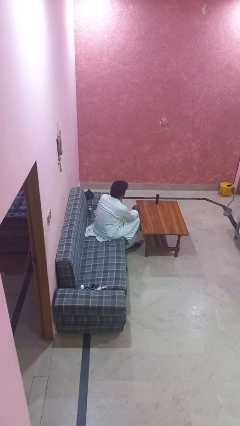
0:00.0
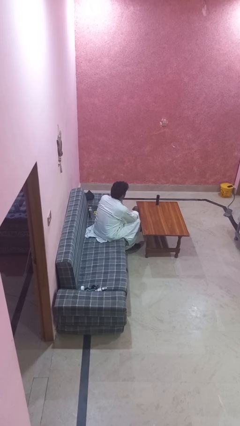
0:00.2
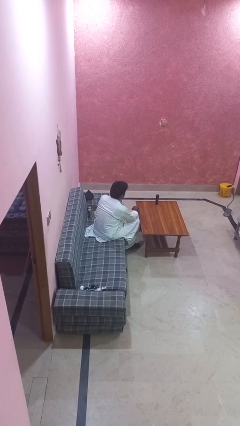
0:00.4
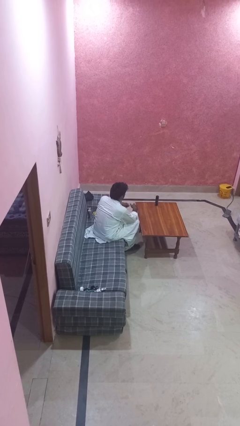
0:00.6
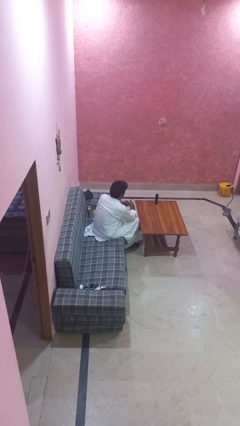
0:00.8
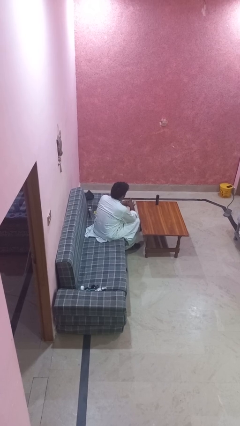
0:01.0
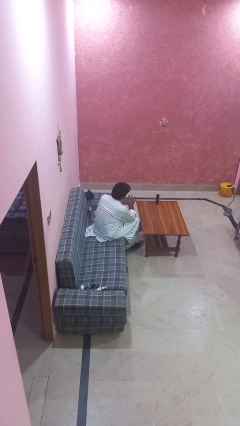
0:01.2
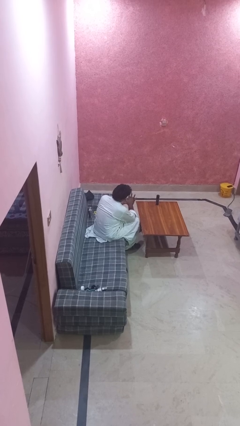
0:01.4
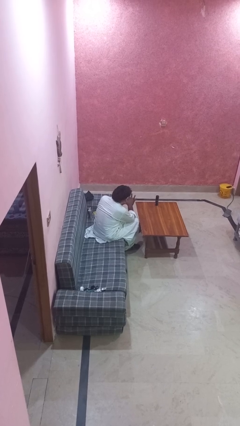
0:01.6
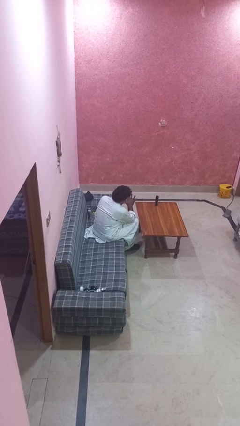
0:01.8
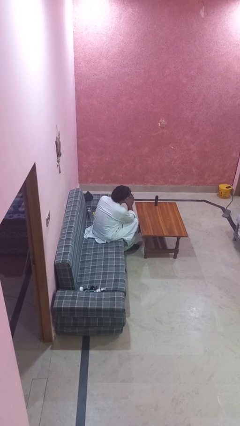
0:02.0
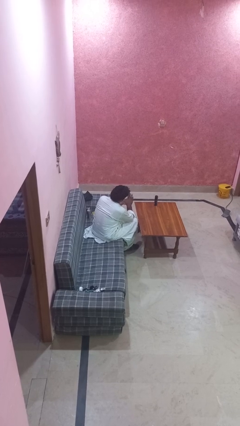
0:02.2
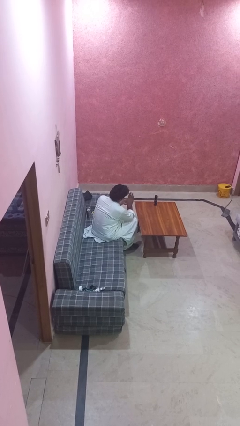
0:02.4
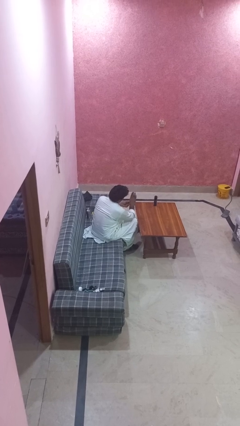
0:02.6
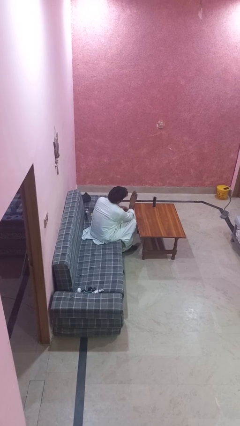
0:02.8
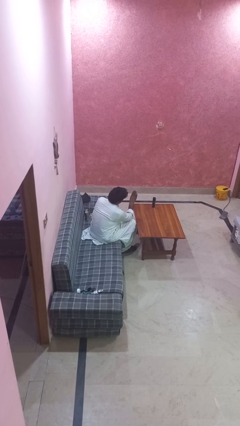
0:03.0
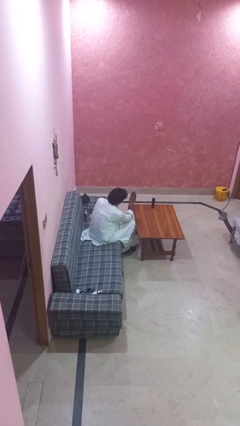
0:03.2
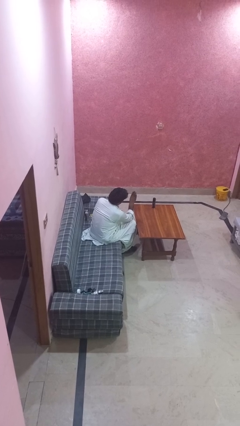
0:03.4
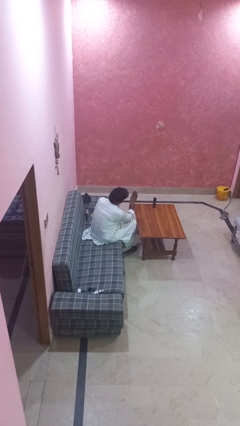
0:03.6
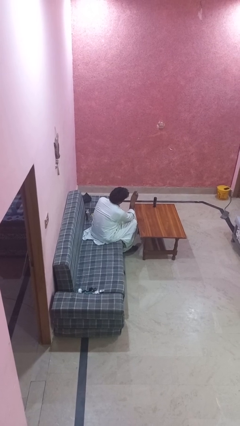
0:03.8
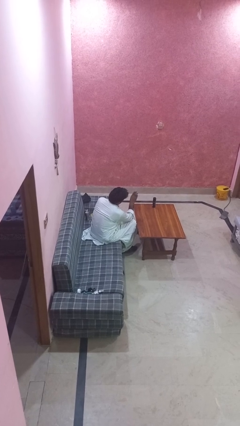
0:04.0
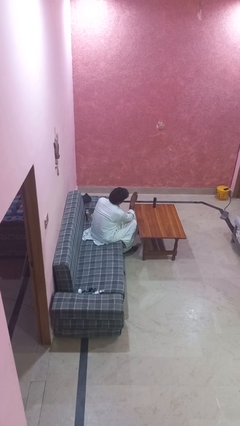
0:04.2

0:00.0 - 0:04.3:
person puts on ring

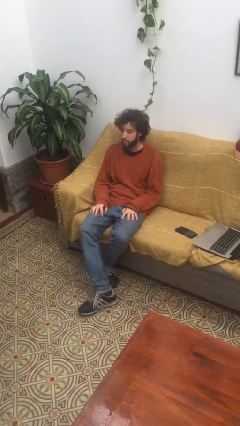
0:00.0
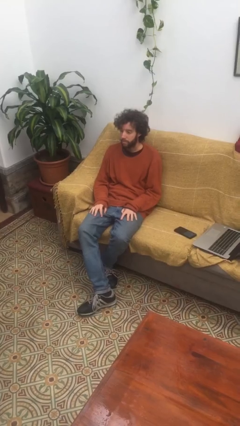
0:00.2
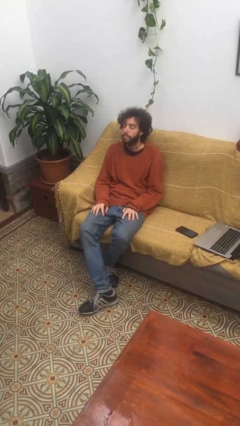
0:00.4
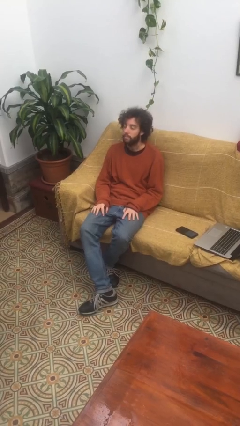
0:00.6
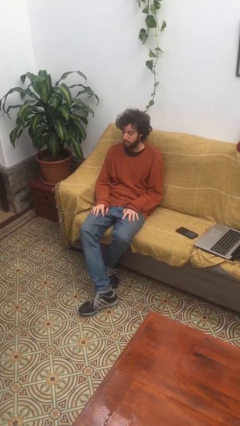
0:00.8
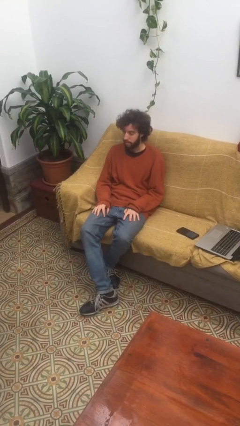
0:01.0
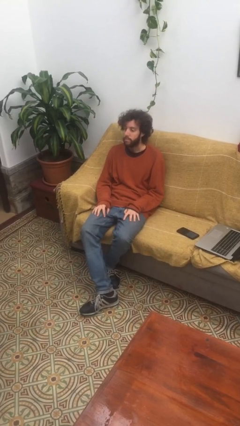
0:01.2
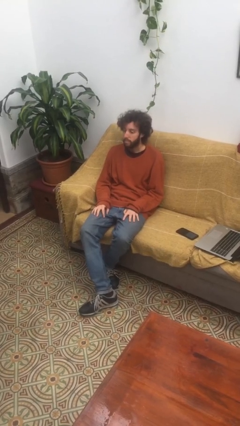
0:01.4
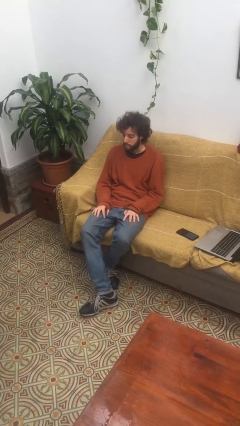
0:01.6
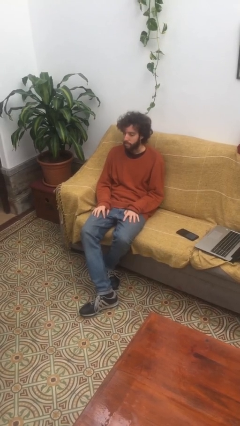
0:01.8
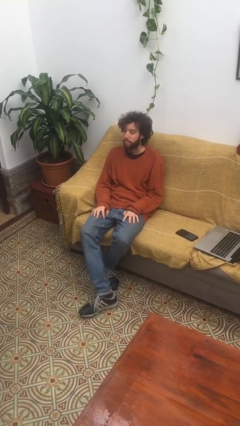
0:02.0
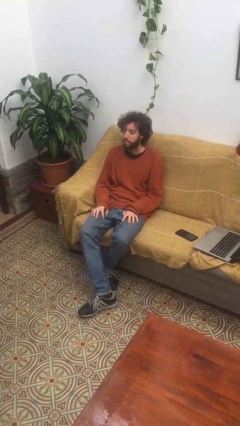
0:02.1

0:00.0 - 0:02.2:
person nods head

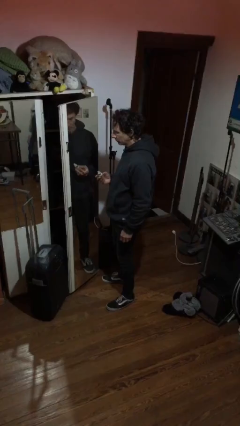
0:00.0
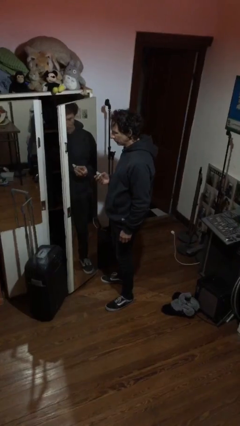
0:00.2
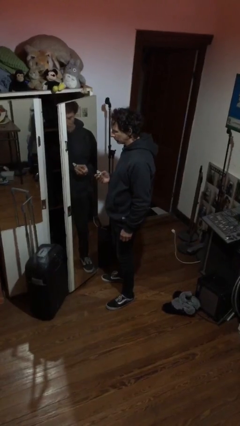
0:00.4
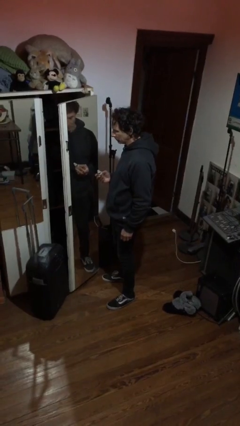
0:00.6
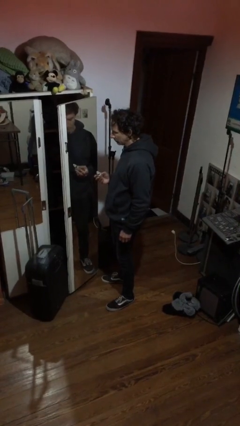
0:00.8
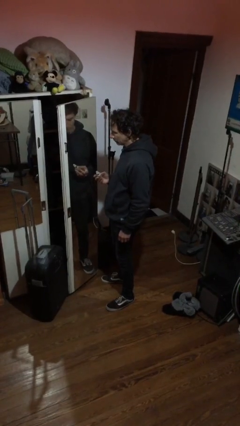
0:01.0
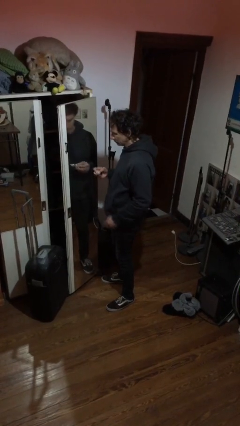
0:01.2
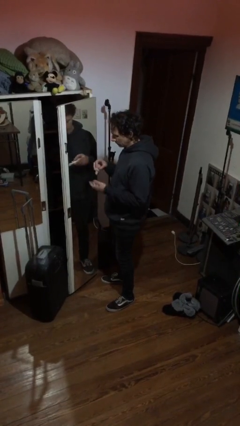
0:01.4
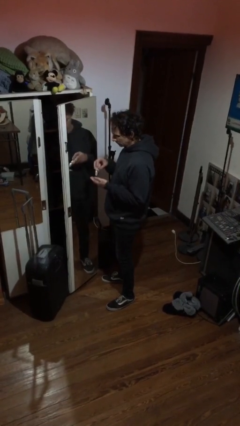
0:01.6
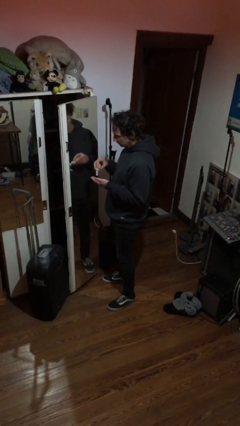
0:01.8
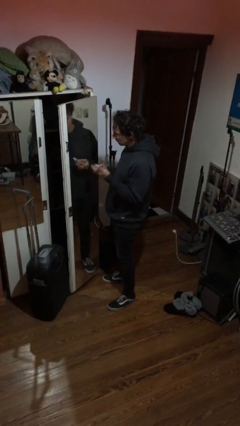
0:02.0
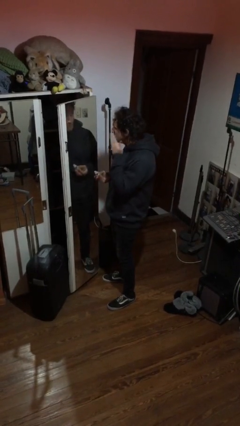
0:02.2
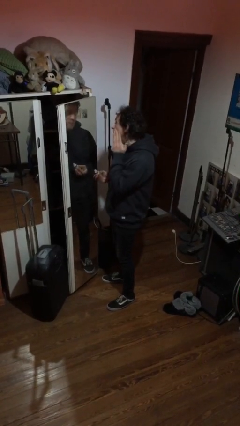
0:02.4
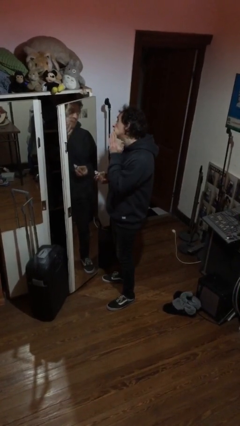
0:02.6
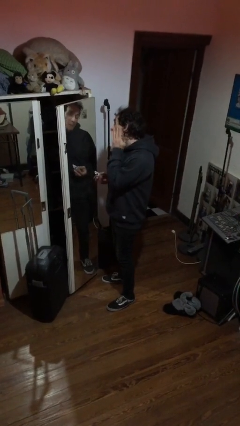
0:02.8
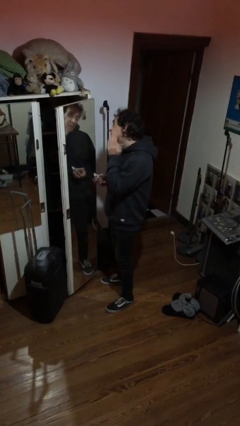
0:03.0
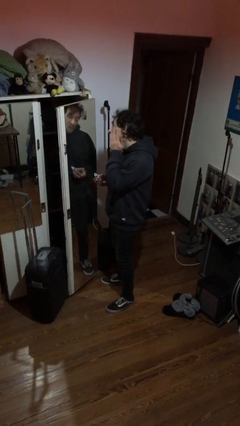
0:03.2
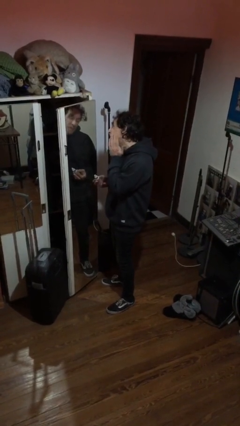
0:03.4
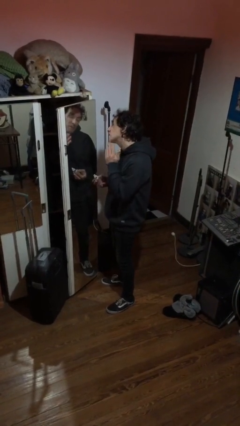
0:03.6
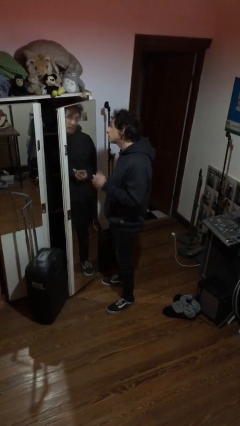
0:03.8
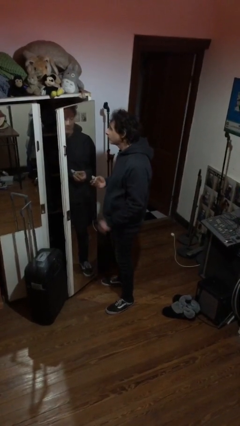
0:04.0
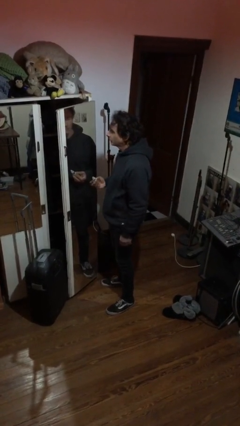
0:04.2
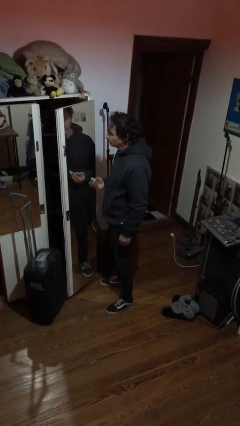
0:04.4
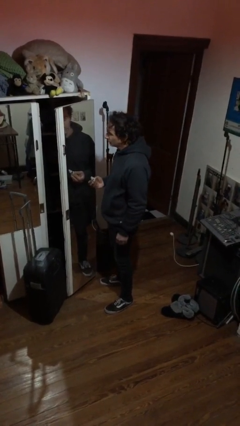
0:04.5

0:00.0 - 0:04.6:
person applies foundation makeup

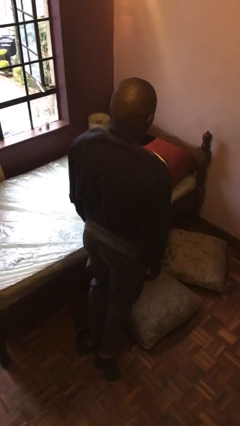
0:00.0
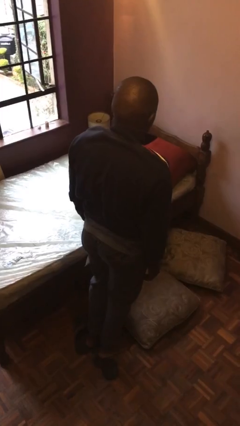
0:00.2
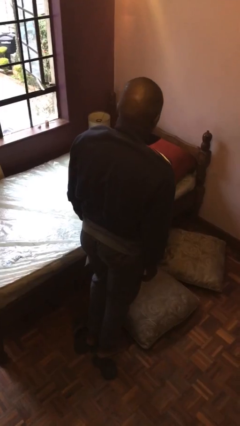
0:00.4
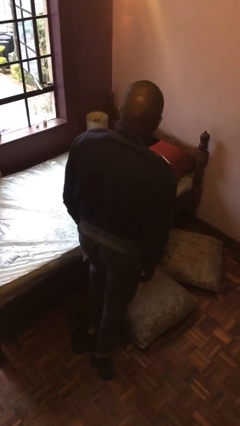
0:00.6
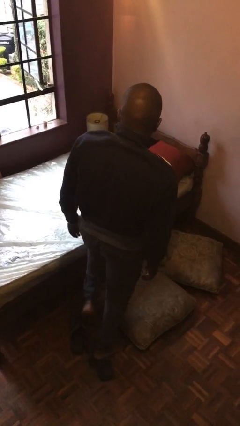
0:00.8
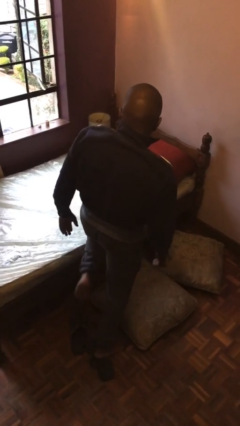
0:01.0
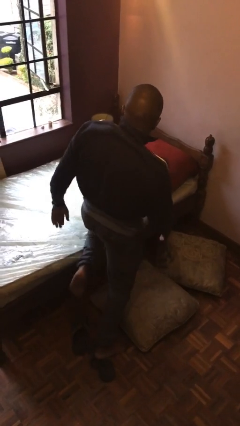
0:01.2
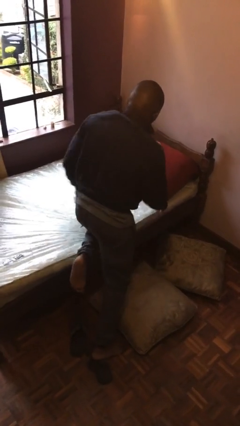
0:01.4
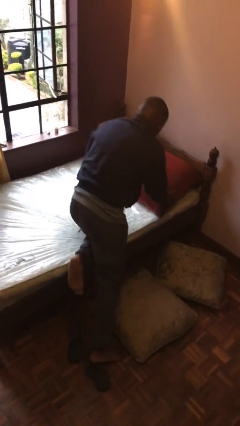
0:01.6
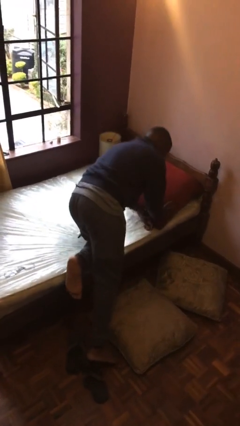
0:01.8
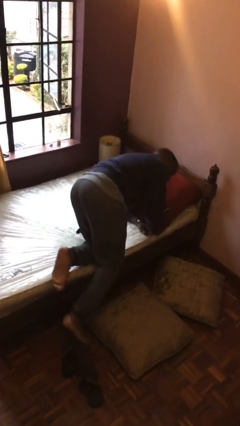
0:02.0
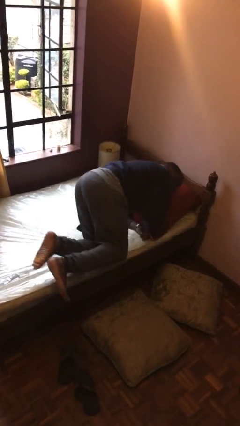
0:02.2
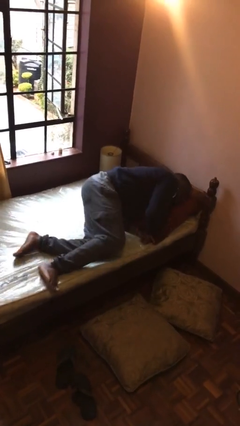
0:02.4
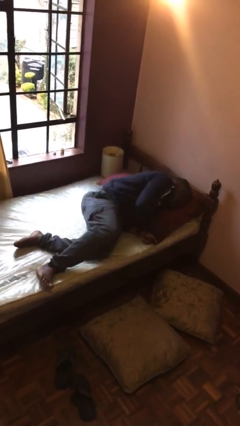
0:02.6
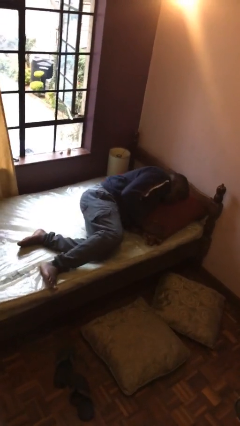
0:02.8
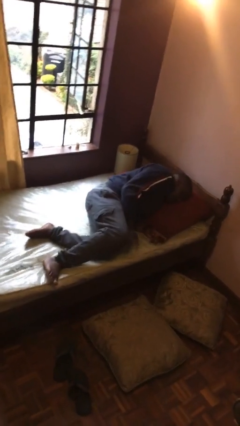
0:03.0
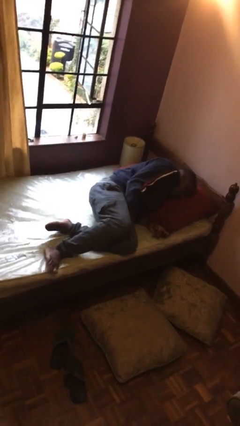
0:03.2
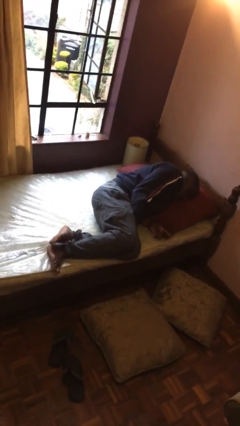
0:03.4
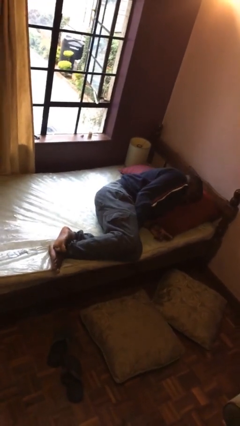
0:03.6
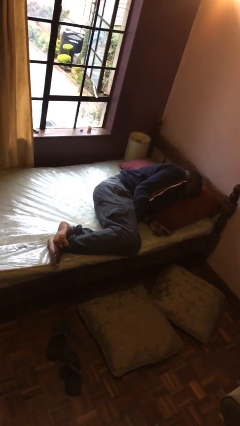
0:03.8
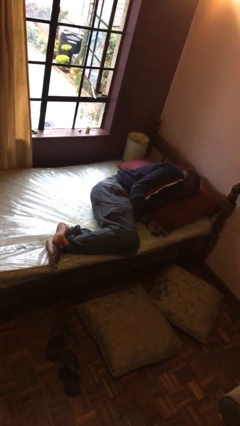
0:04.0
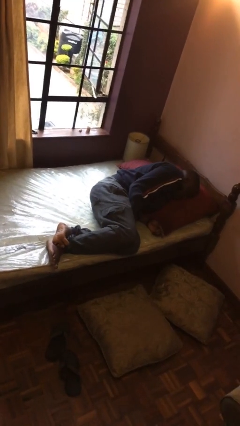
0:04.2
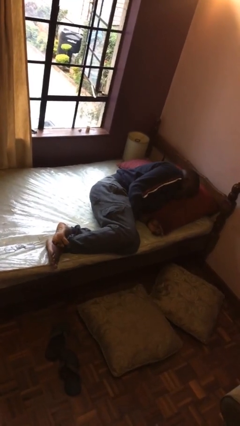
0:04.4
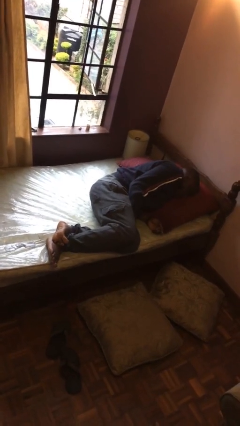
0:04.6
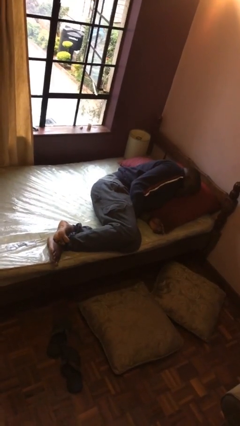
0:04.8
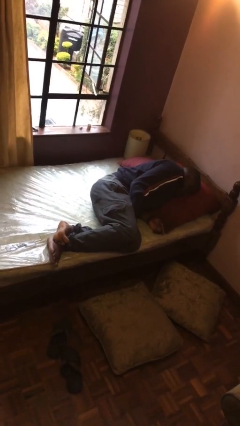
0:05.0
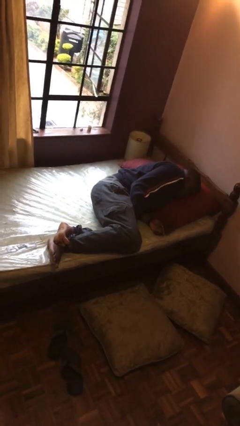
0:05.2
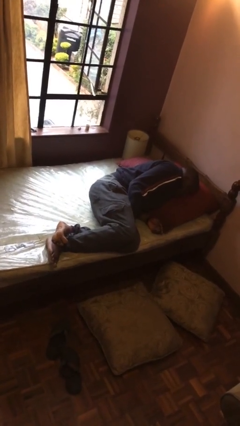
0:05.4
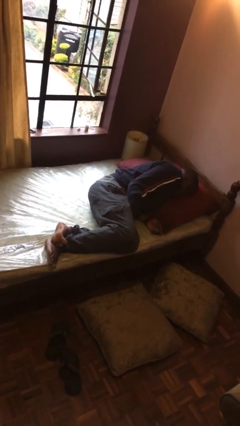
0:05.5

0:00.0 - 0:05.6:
person lies down on bed

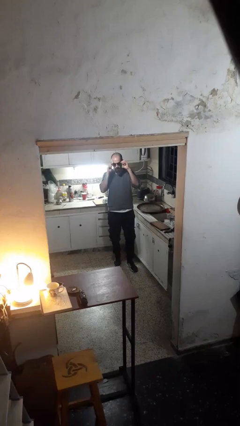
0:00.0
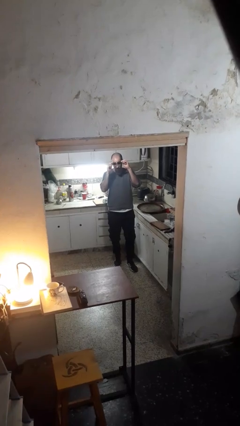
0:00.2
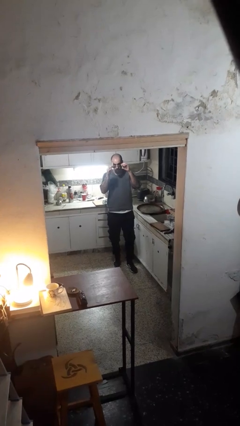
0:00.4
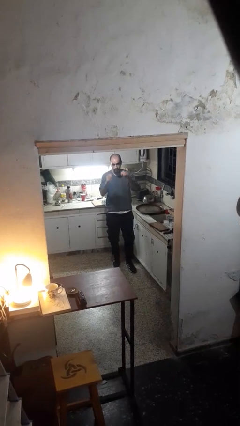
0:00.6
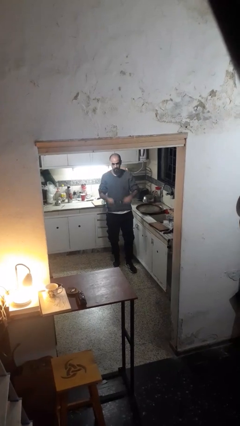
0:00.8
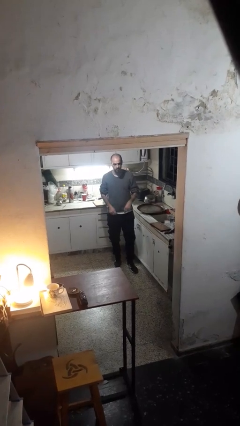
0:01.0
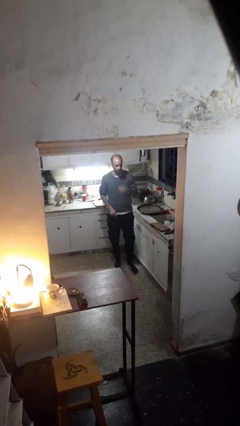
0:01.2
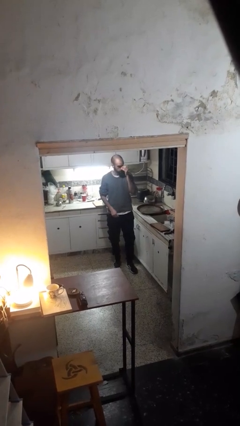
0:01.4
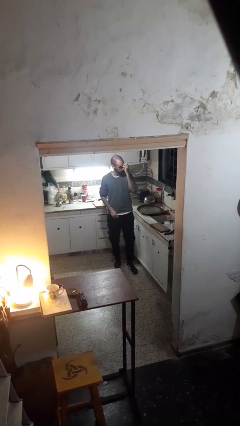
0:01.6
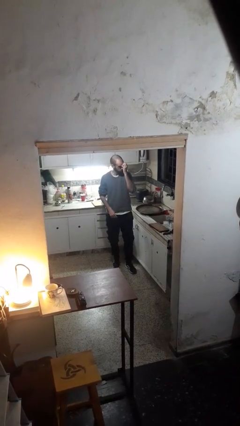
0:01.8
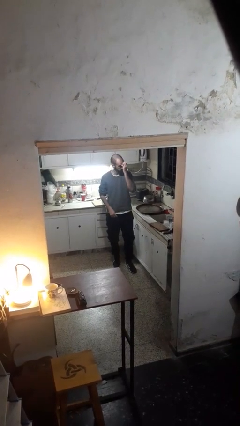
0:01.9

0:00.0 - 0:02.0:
person takes off sunglasses
